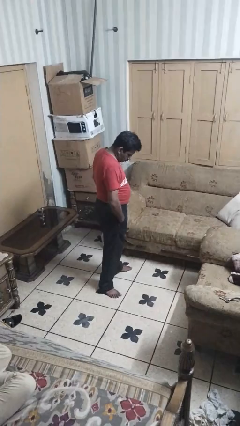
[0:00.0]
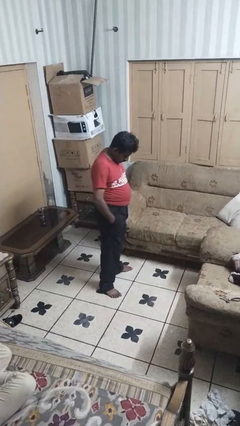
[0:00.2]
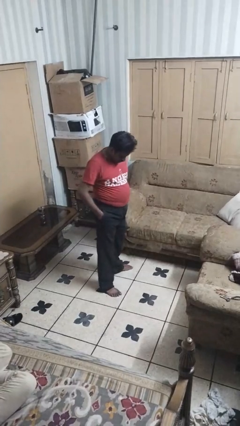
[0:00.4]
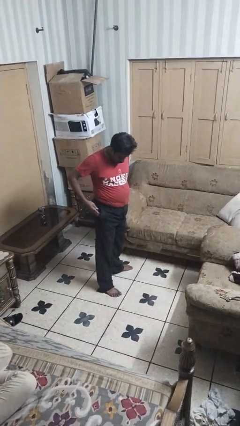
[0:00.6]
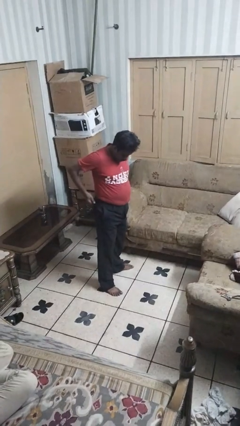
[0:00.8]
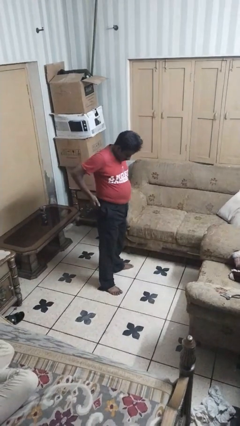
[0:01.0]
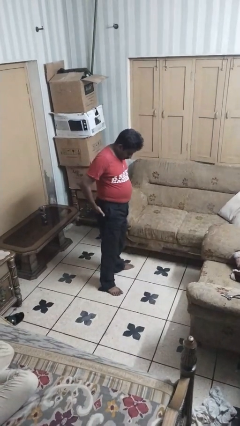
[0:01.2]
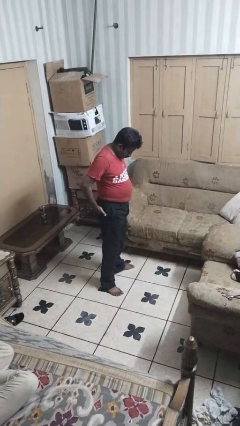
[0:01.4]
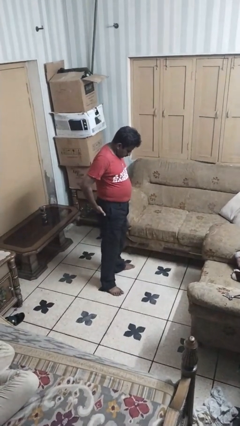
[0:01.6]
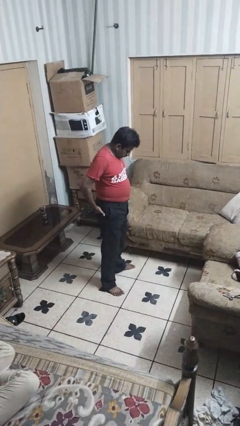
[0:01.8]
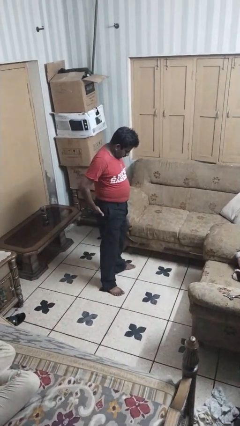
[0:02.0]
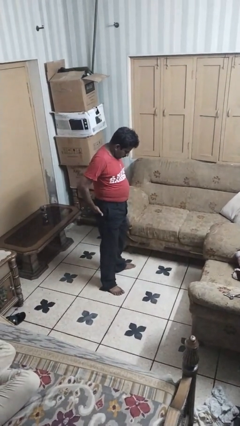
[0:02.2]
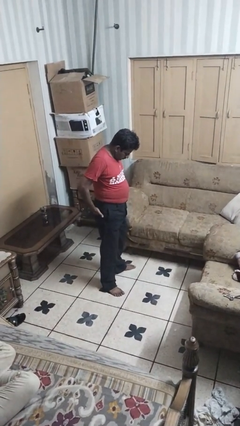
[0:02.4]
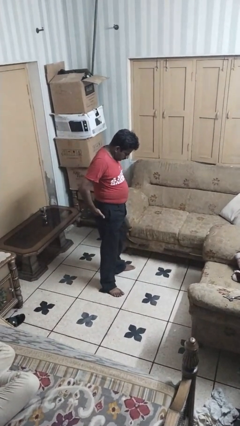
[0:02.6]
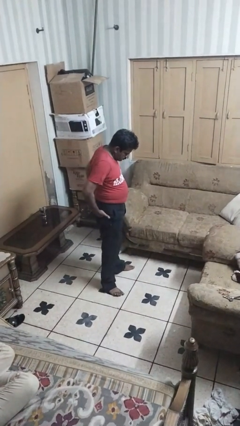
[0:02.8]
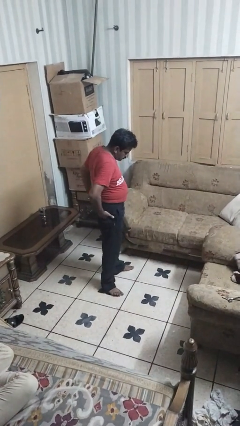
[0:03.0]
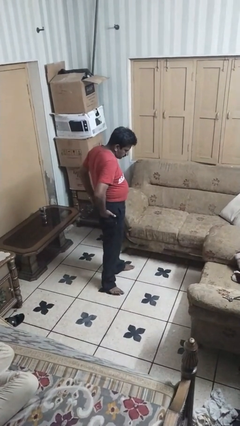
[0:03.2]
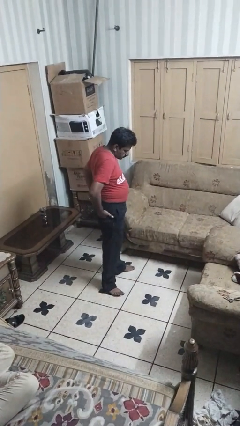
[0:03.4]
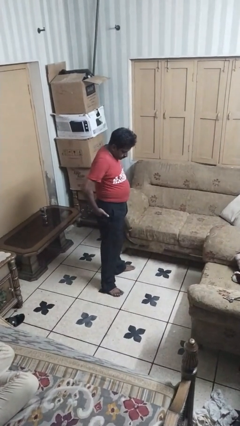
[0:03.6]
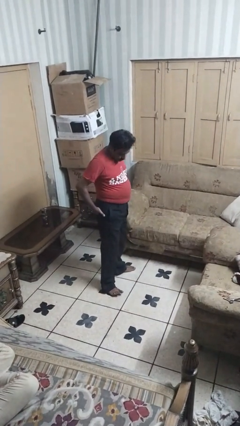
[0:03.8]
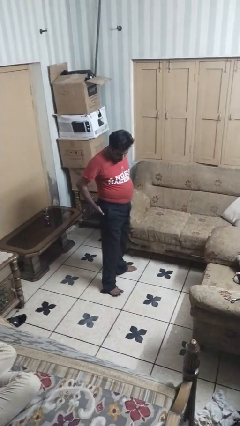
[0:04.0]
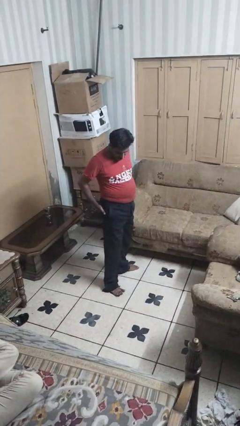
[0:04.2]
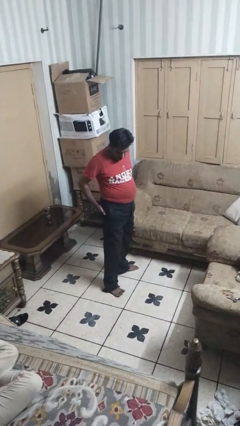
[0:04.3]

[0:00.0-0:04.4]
person puts hands in back pockets

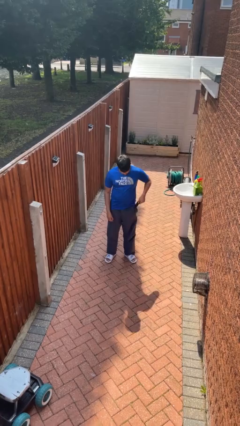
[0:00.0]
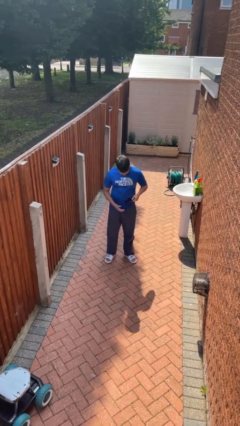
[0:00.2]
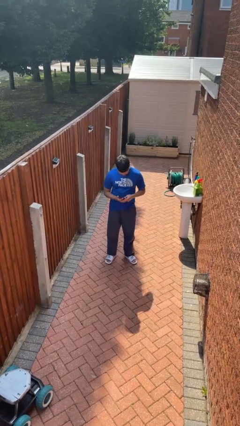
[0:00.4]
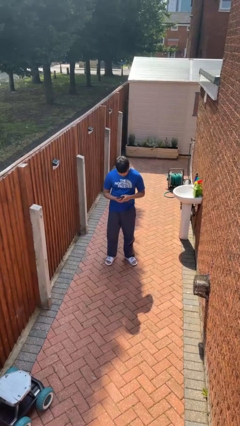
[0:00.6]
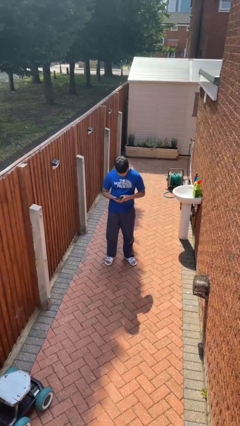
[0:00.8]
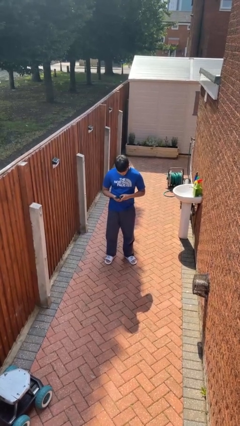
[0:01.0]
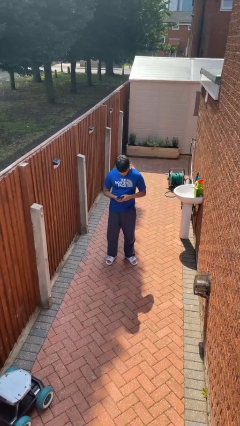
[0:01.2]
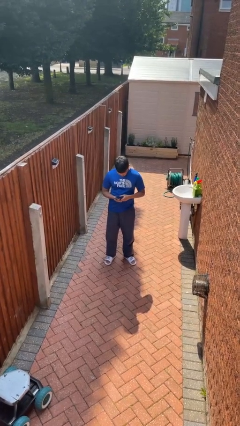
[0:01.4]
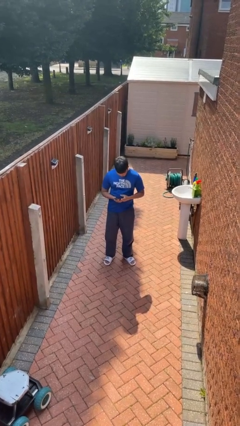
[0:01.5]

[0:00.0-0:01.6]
person takes phone from pocket

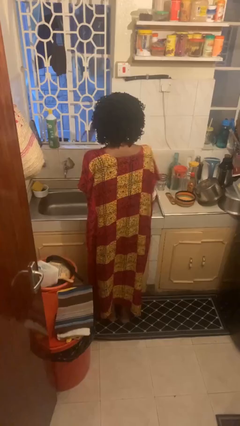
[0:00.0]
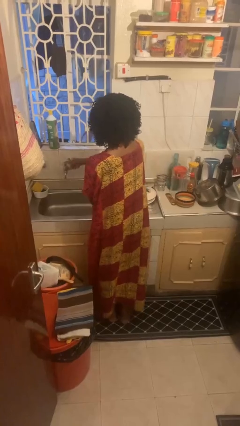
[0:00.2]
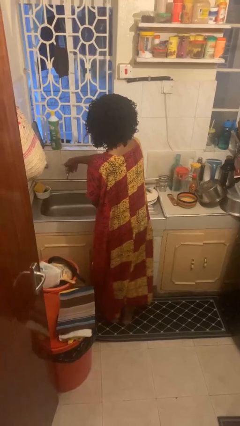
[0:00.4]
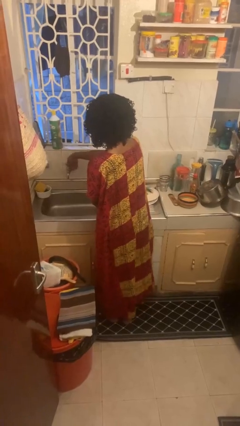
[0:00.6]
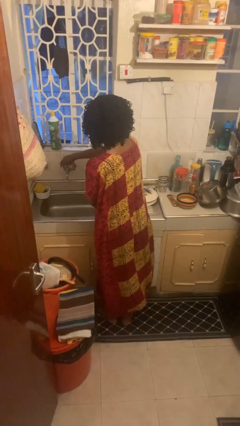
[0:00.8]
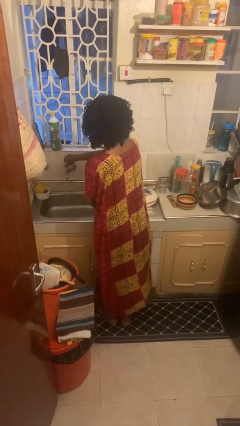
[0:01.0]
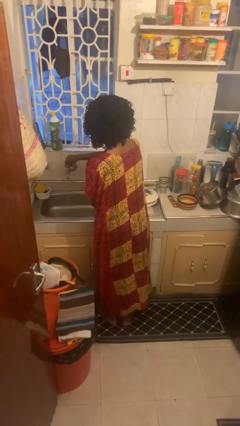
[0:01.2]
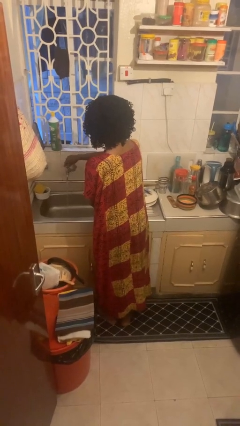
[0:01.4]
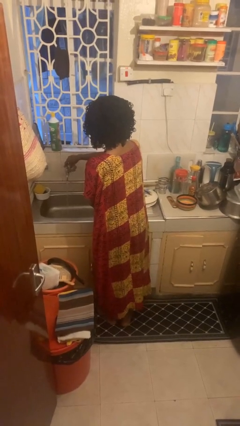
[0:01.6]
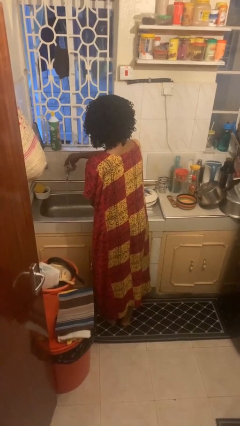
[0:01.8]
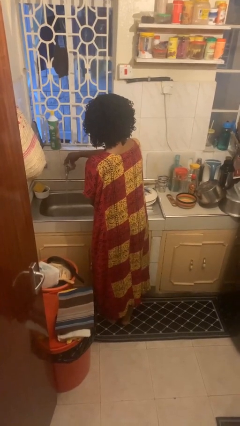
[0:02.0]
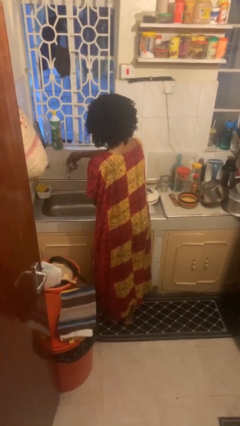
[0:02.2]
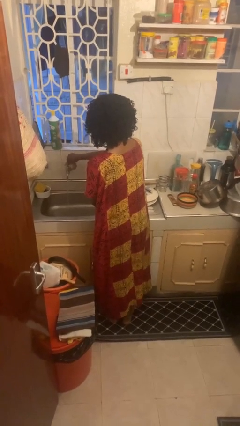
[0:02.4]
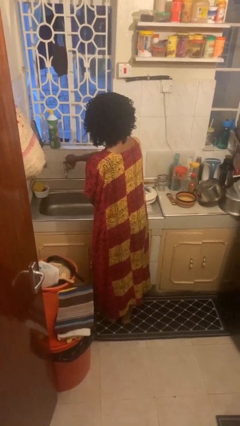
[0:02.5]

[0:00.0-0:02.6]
person turns on faucet

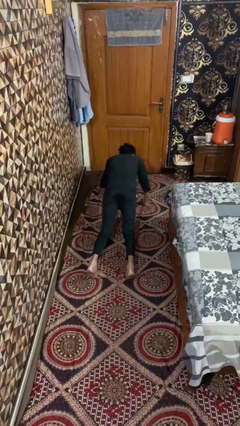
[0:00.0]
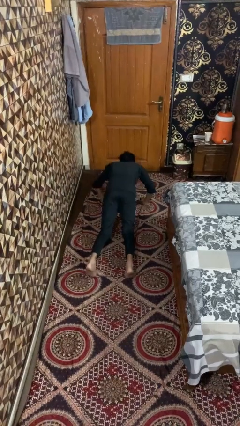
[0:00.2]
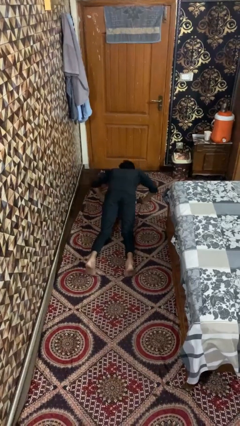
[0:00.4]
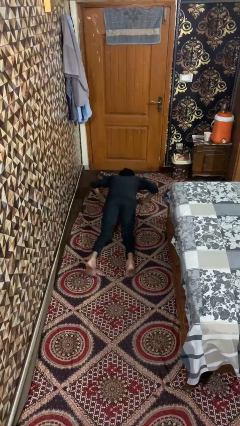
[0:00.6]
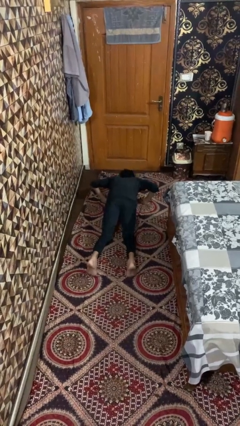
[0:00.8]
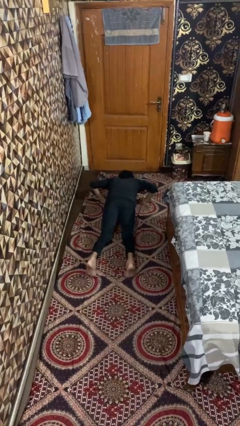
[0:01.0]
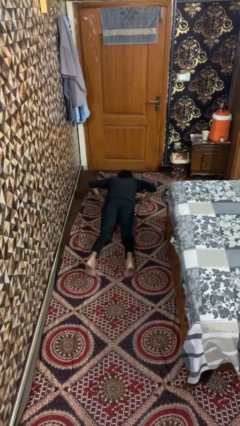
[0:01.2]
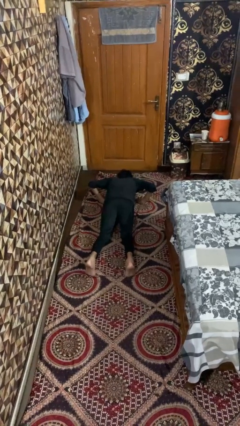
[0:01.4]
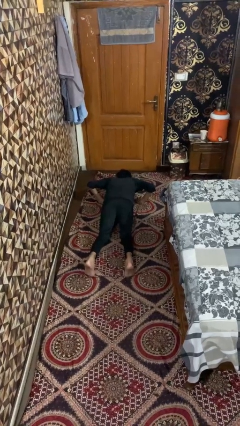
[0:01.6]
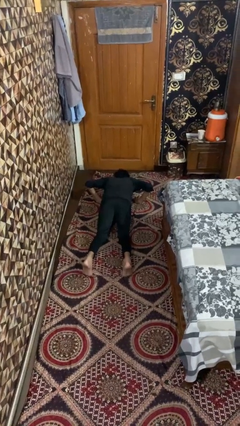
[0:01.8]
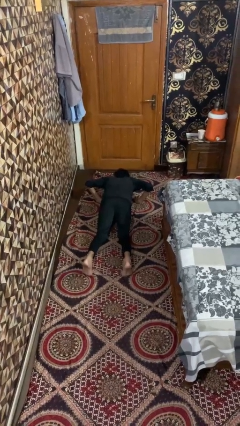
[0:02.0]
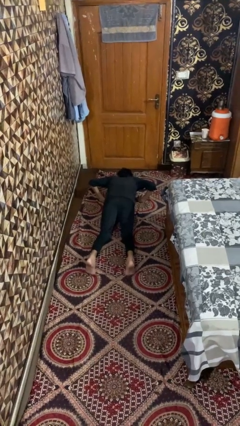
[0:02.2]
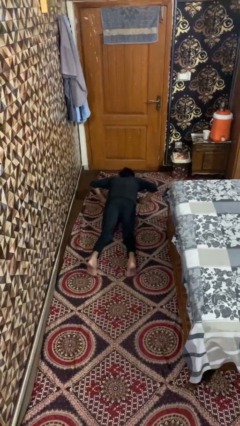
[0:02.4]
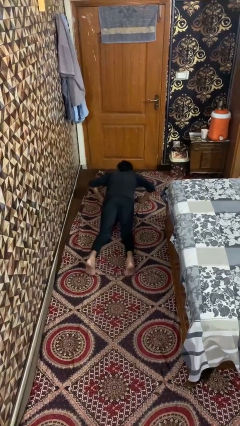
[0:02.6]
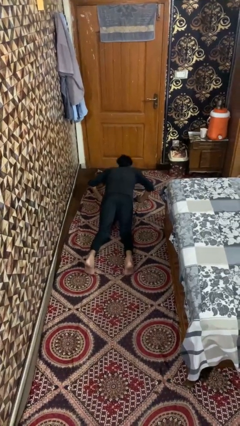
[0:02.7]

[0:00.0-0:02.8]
person exercises with pushup

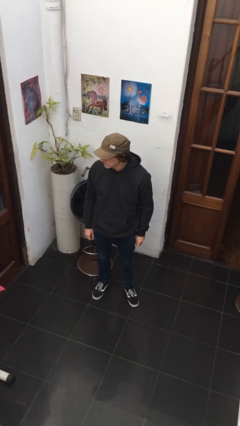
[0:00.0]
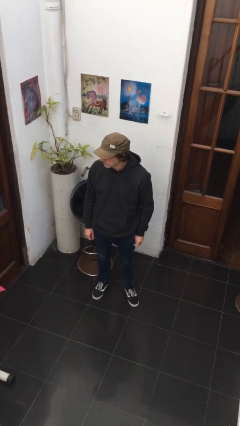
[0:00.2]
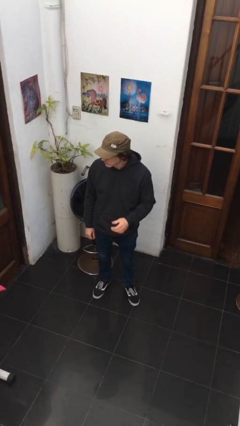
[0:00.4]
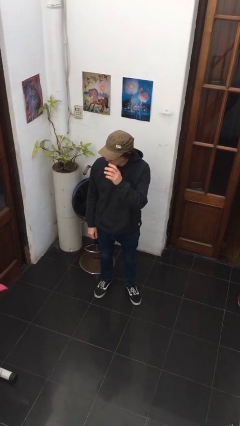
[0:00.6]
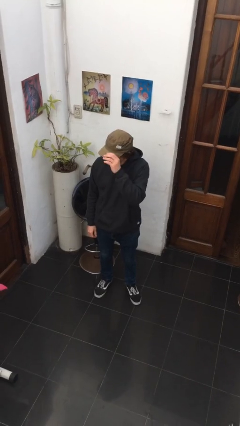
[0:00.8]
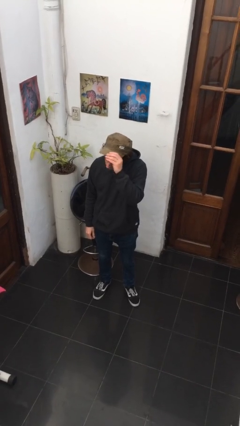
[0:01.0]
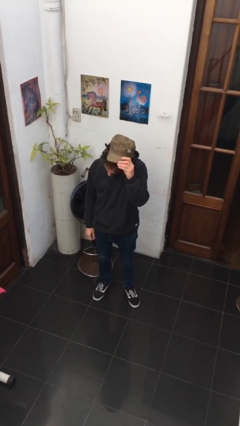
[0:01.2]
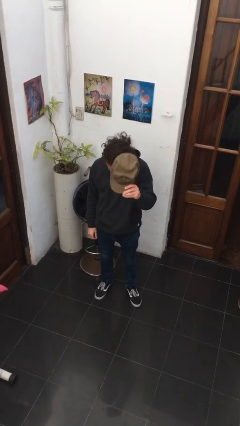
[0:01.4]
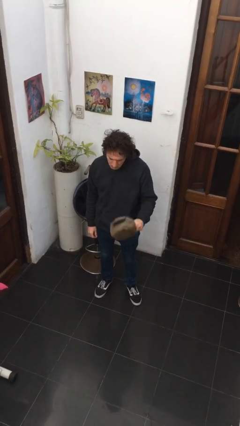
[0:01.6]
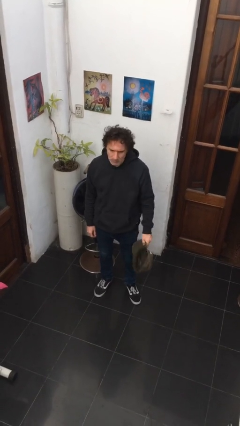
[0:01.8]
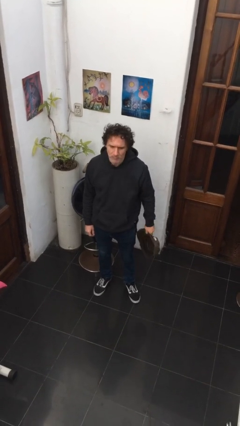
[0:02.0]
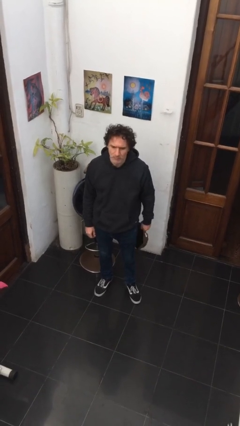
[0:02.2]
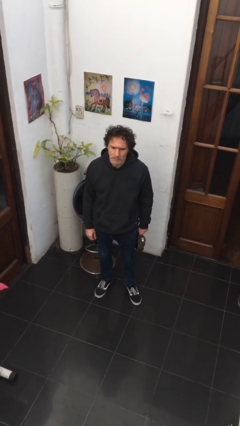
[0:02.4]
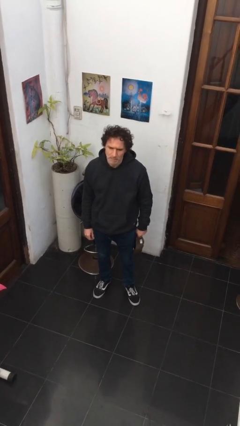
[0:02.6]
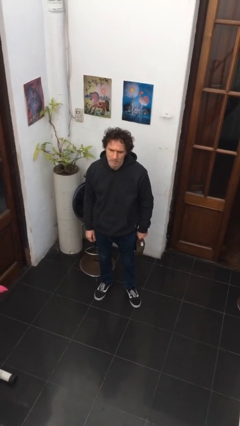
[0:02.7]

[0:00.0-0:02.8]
person takes off hat

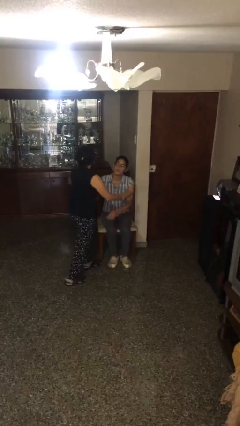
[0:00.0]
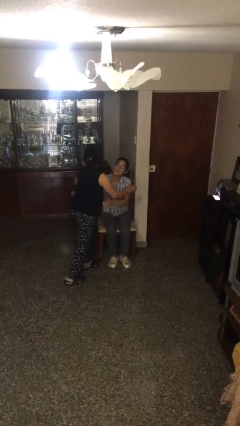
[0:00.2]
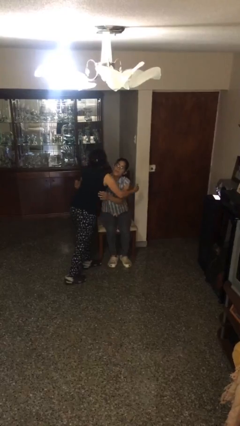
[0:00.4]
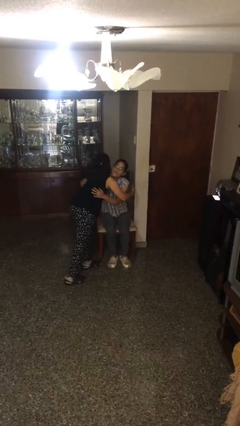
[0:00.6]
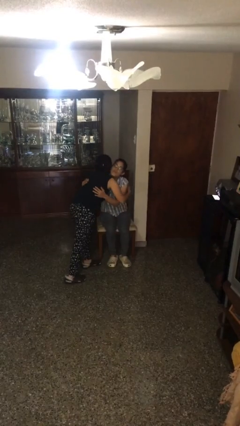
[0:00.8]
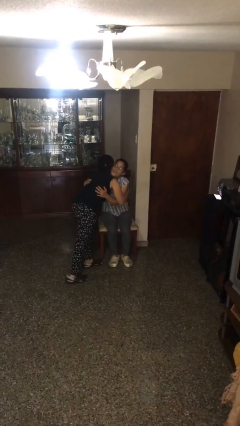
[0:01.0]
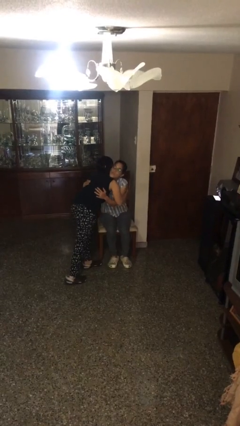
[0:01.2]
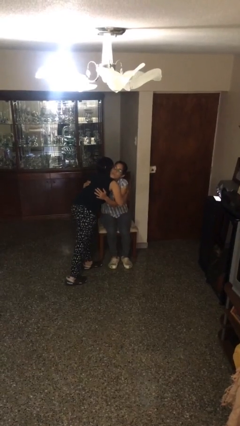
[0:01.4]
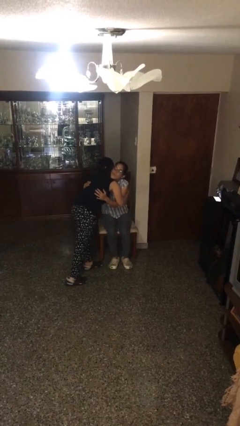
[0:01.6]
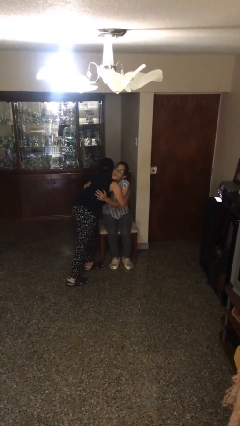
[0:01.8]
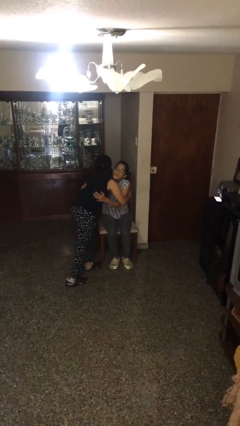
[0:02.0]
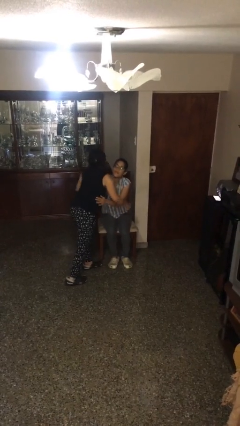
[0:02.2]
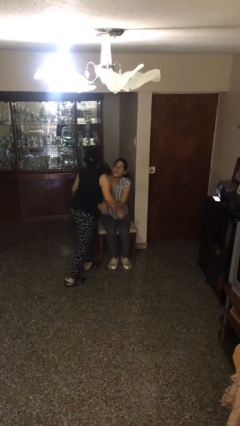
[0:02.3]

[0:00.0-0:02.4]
person embraces person

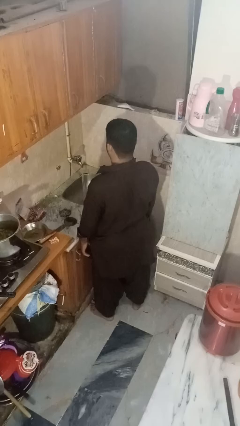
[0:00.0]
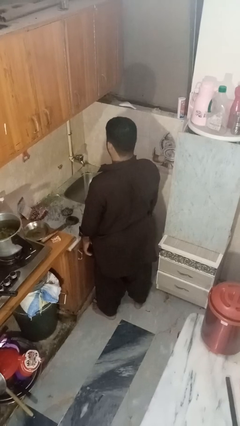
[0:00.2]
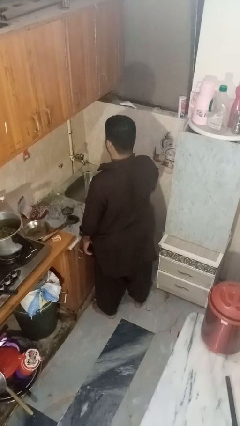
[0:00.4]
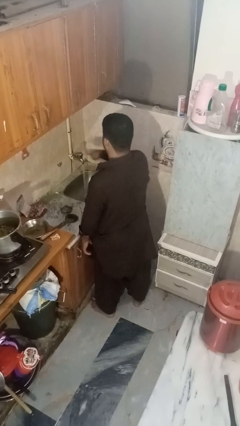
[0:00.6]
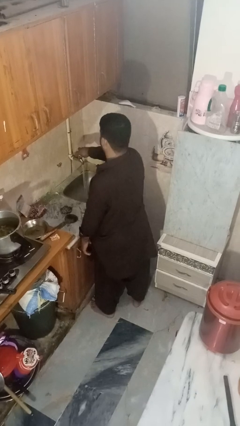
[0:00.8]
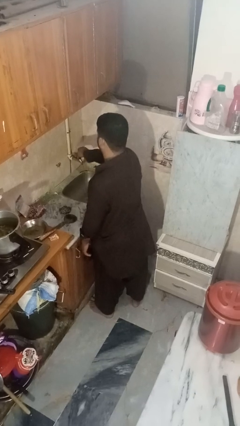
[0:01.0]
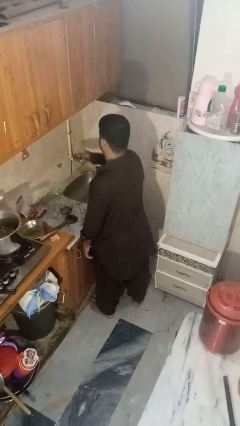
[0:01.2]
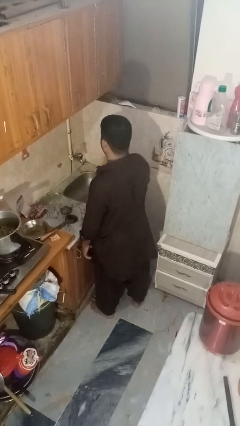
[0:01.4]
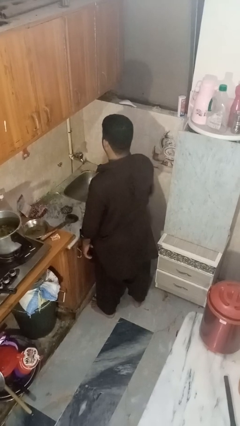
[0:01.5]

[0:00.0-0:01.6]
person turns off faucet
